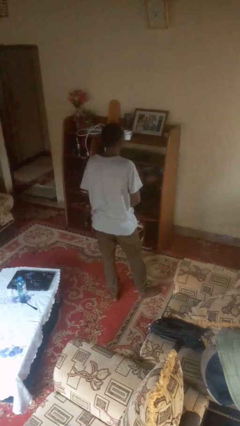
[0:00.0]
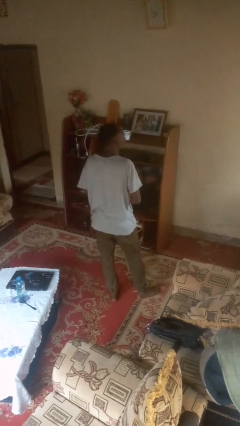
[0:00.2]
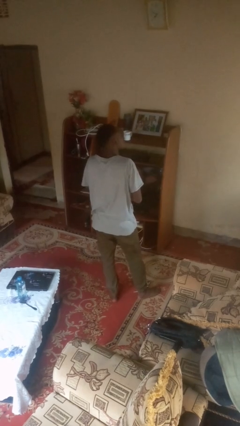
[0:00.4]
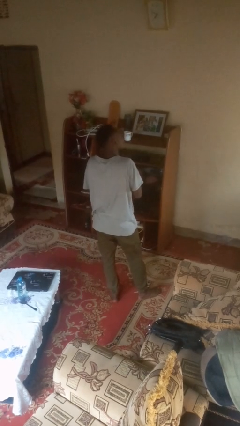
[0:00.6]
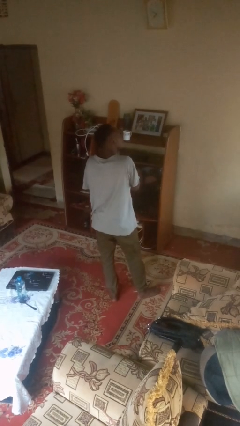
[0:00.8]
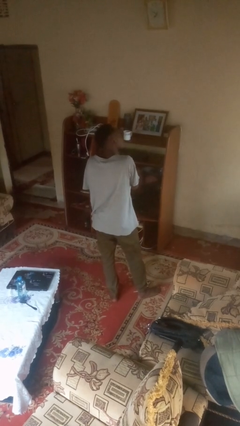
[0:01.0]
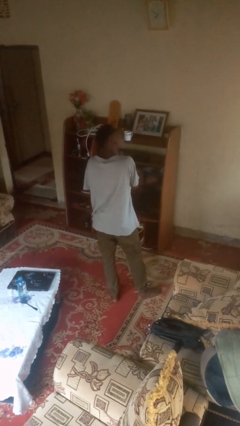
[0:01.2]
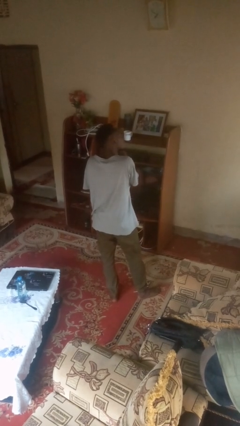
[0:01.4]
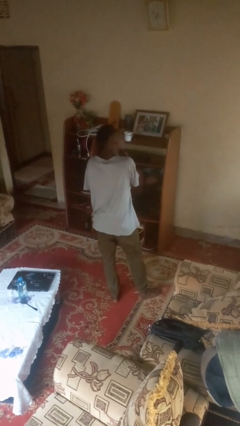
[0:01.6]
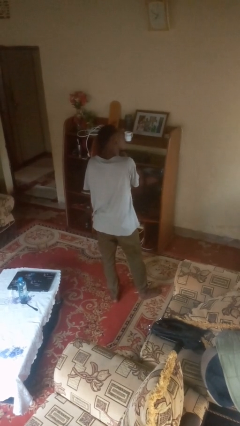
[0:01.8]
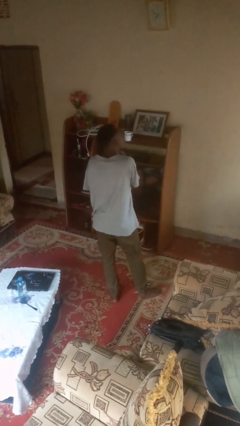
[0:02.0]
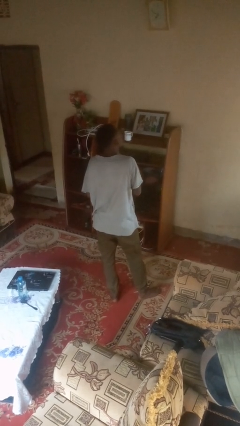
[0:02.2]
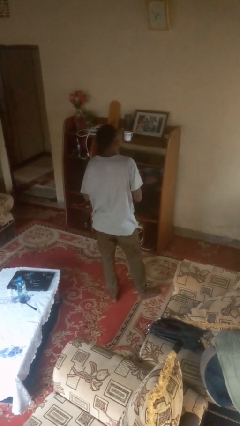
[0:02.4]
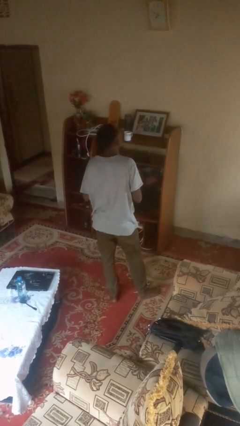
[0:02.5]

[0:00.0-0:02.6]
person takes off earrings

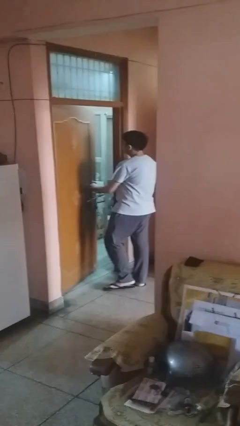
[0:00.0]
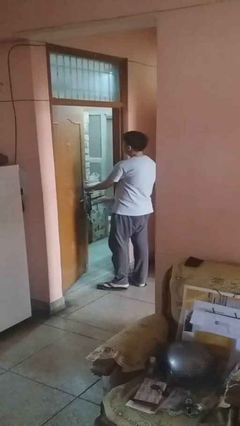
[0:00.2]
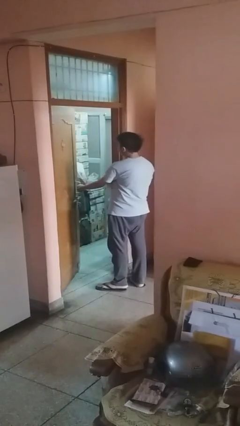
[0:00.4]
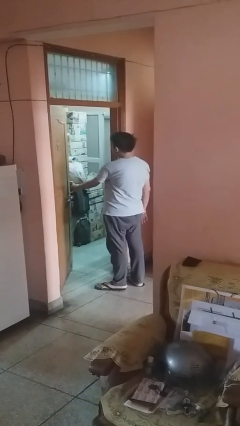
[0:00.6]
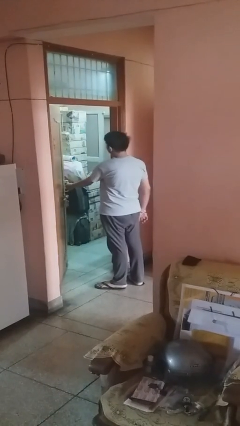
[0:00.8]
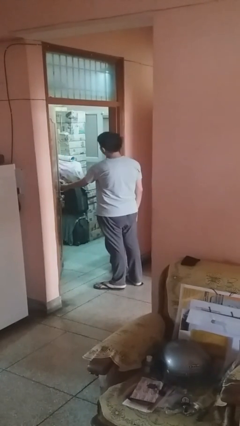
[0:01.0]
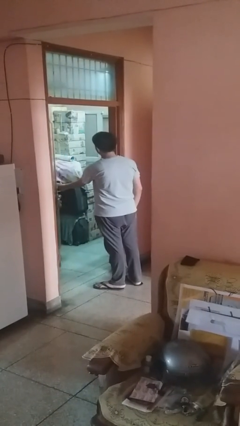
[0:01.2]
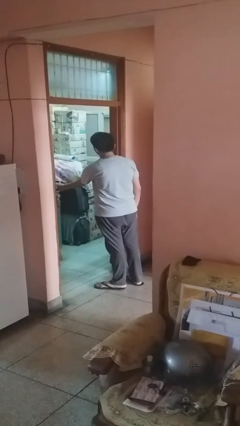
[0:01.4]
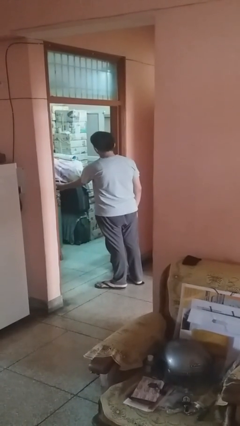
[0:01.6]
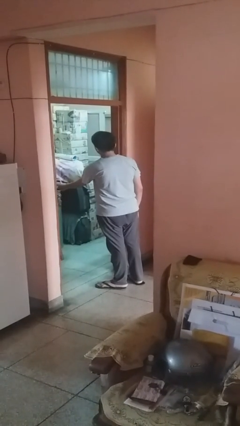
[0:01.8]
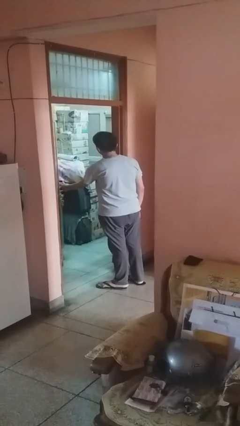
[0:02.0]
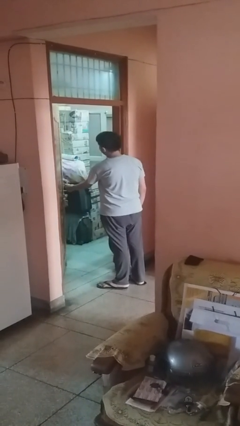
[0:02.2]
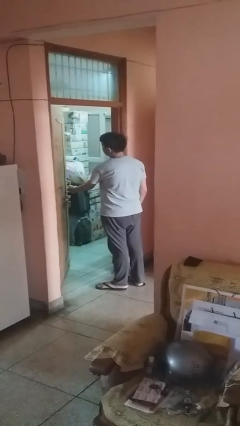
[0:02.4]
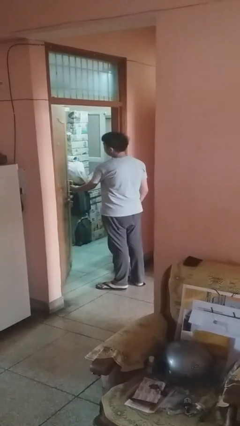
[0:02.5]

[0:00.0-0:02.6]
person opens facility door

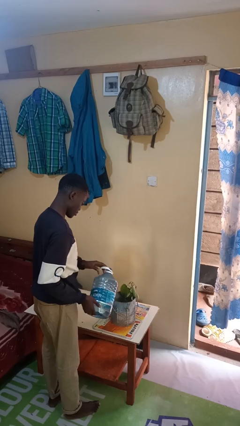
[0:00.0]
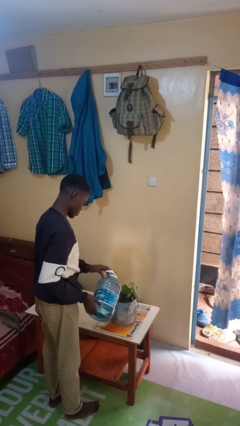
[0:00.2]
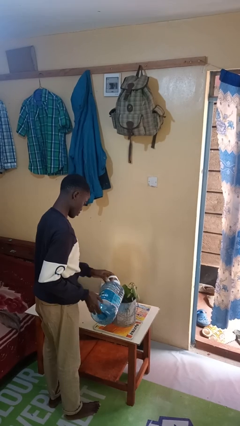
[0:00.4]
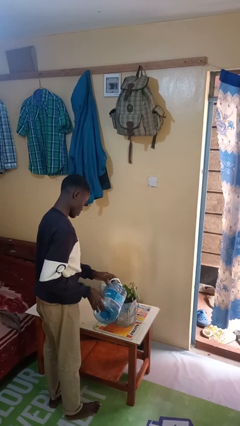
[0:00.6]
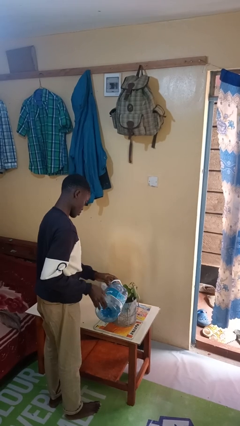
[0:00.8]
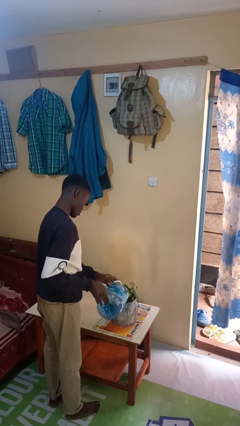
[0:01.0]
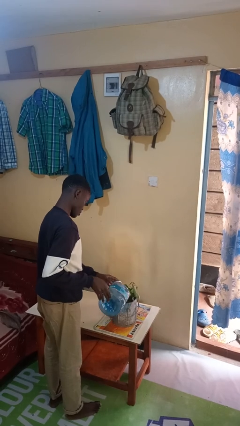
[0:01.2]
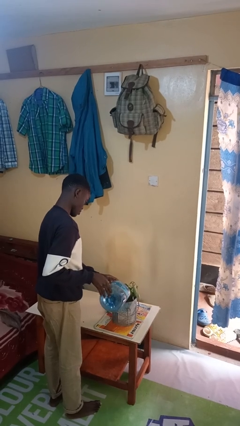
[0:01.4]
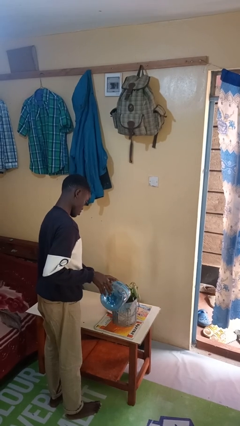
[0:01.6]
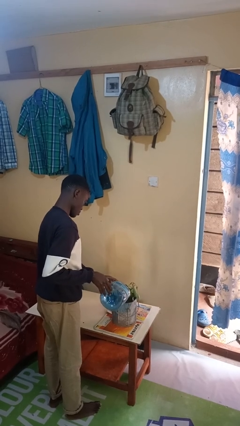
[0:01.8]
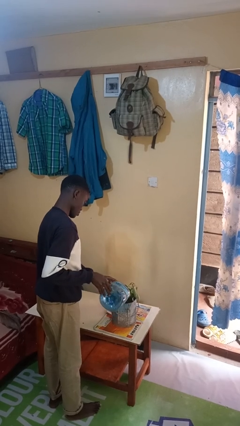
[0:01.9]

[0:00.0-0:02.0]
person waters houseplant

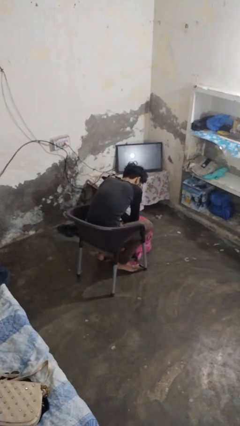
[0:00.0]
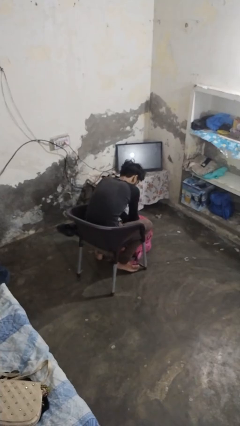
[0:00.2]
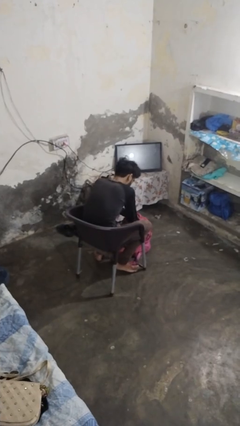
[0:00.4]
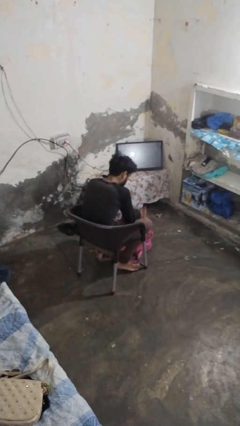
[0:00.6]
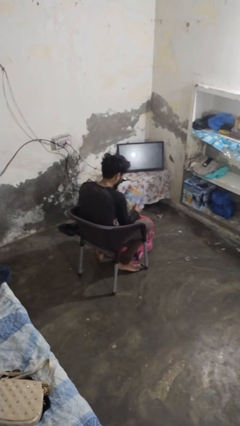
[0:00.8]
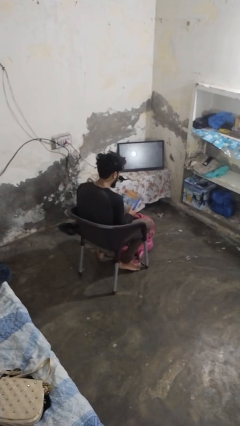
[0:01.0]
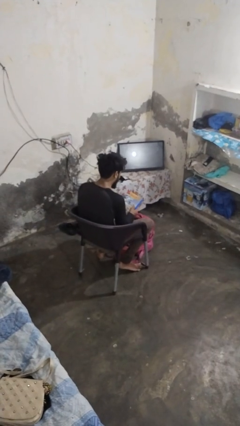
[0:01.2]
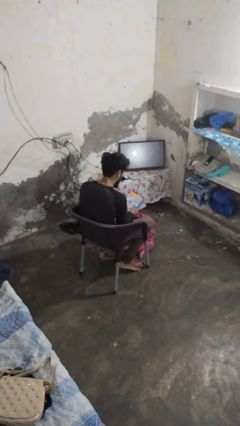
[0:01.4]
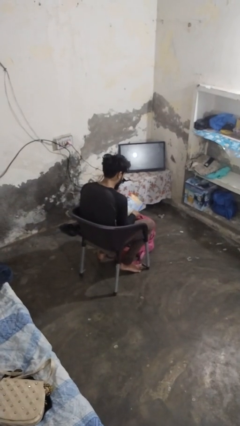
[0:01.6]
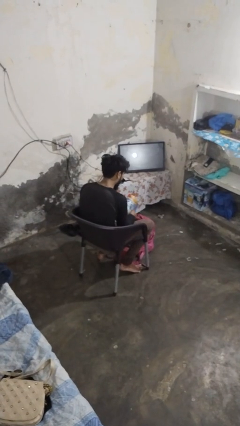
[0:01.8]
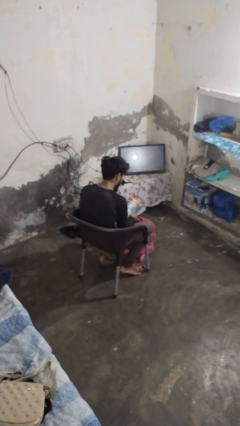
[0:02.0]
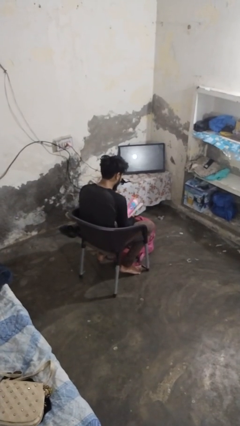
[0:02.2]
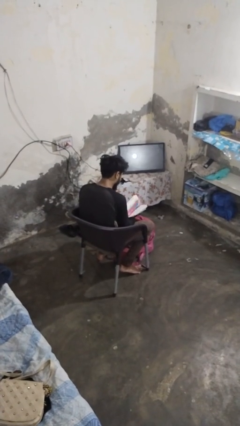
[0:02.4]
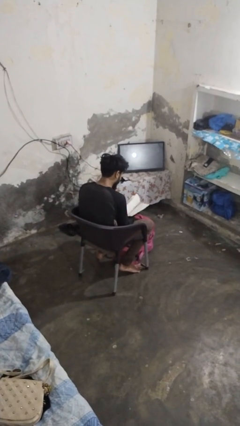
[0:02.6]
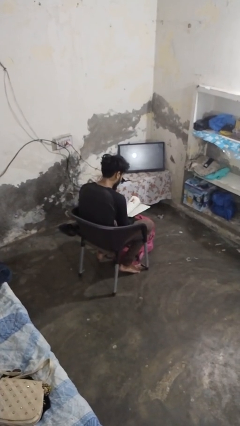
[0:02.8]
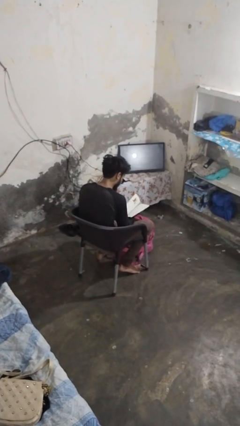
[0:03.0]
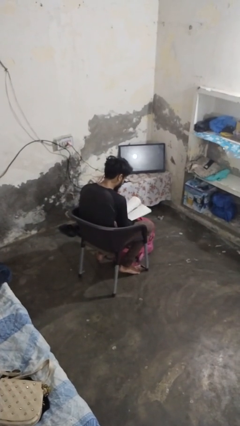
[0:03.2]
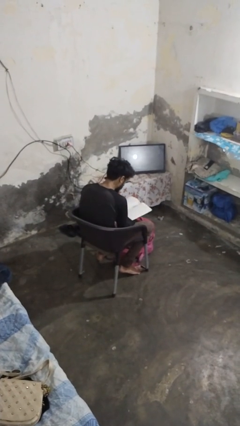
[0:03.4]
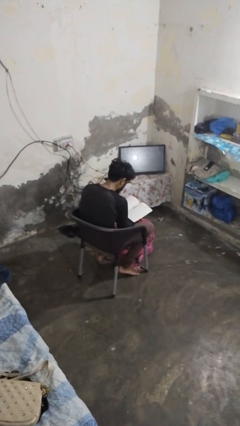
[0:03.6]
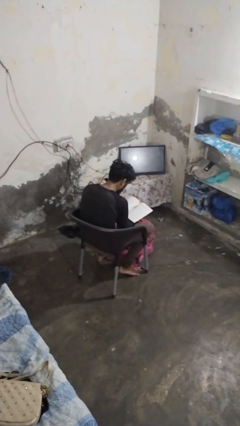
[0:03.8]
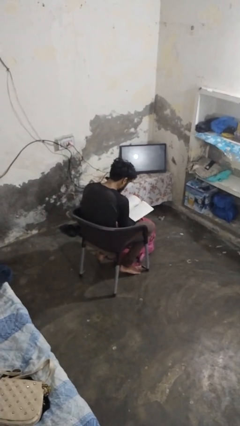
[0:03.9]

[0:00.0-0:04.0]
person takes object from backpack

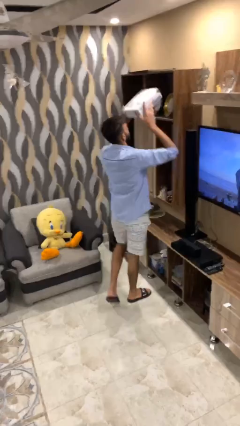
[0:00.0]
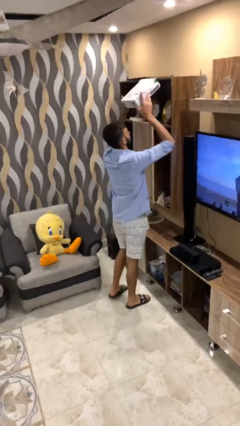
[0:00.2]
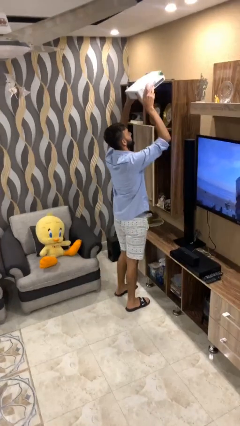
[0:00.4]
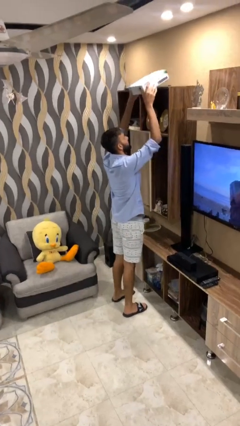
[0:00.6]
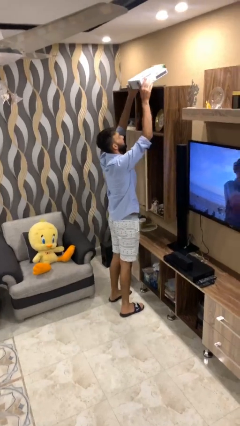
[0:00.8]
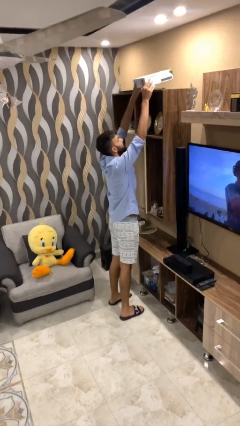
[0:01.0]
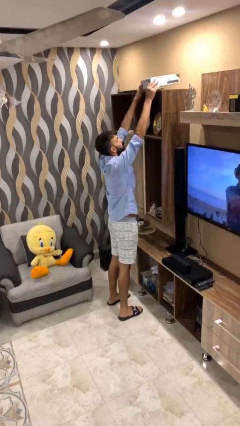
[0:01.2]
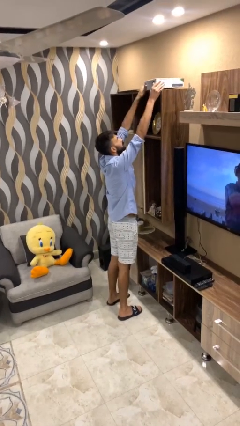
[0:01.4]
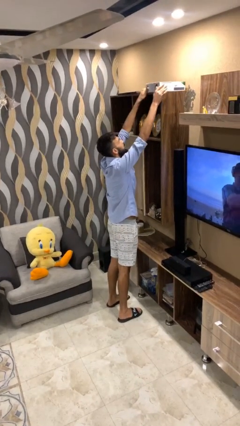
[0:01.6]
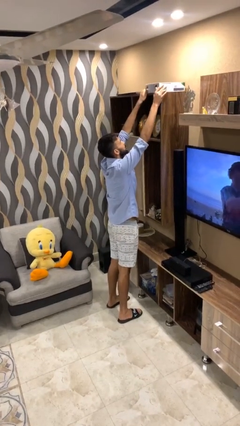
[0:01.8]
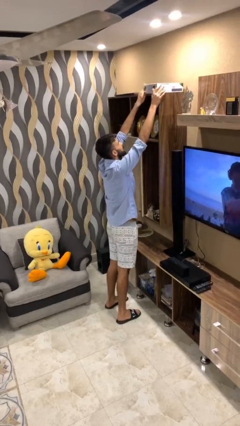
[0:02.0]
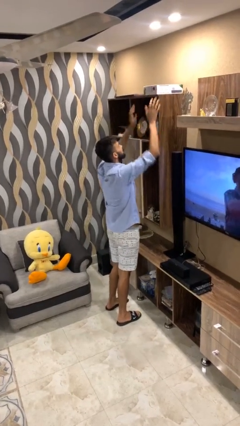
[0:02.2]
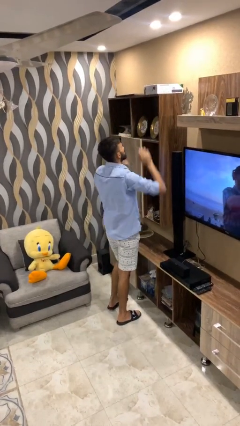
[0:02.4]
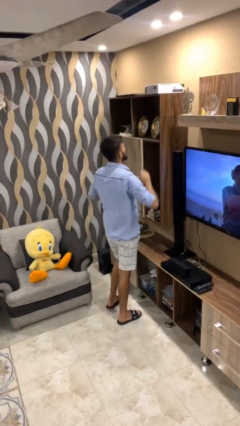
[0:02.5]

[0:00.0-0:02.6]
person puts down object on shelf

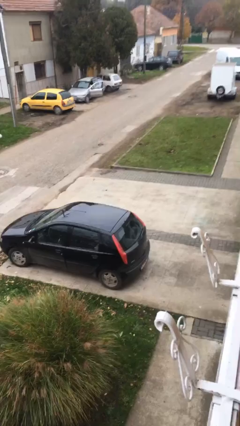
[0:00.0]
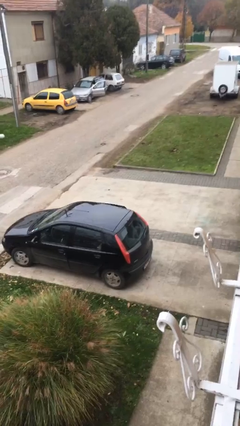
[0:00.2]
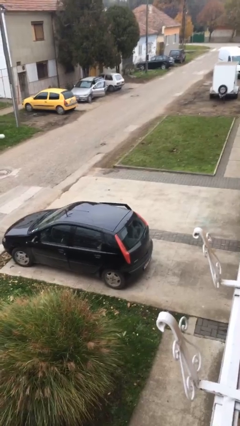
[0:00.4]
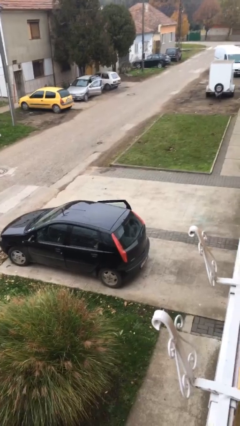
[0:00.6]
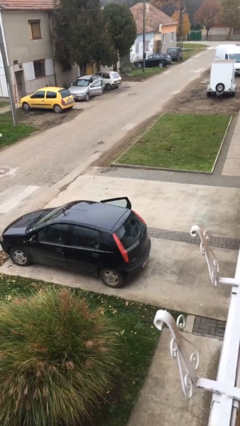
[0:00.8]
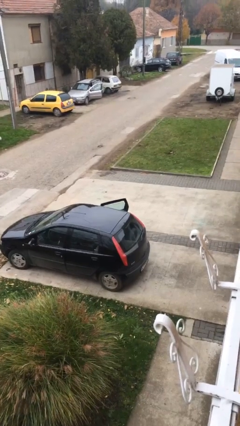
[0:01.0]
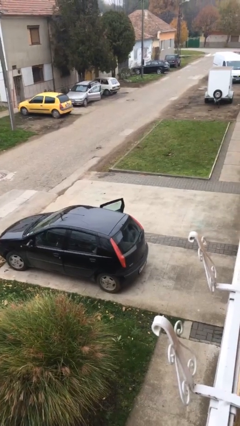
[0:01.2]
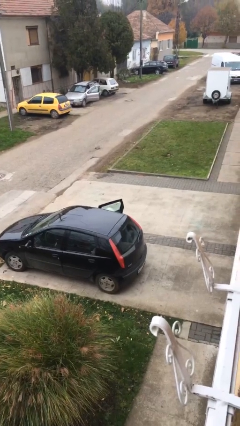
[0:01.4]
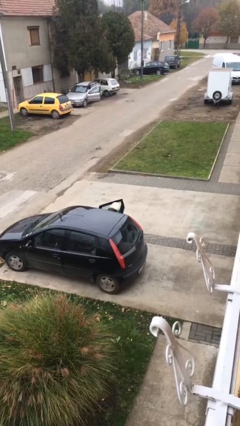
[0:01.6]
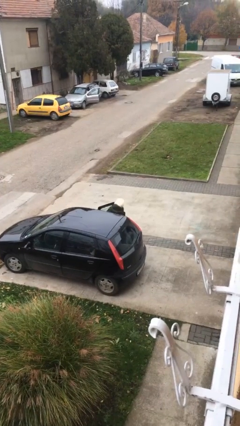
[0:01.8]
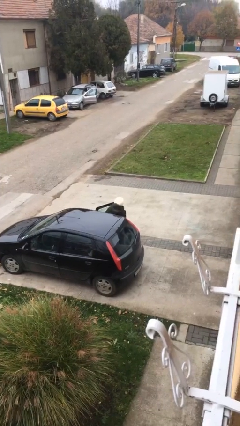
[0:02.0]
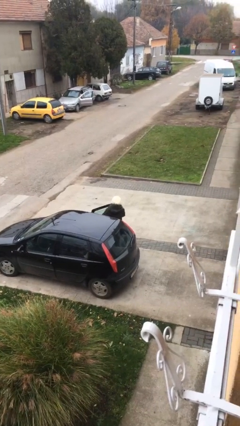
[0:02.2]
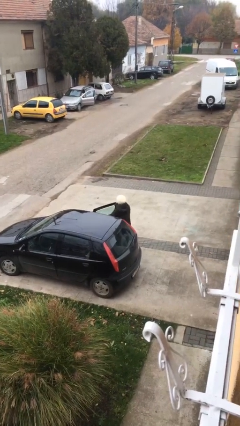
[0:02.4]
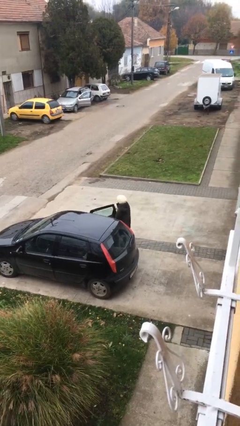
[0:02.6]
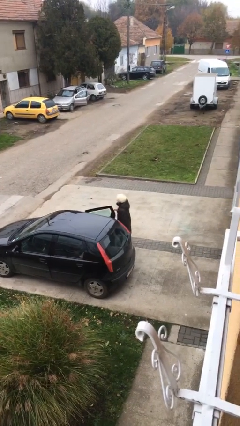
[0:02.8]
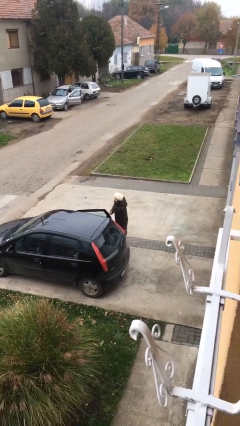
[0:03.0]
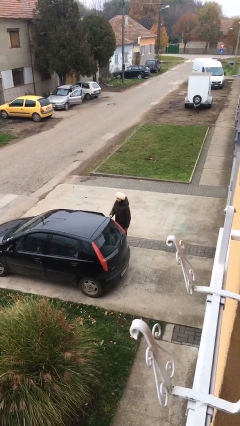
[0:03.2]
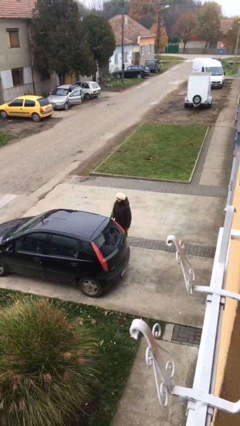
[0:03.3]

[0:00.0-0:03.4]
person exits car
